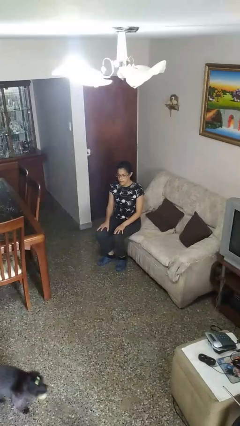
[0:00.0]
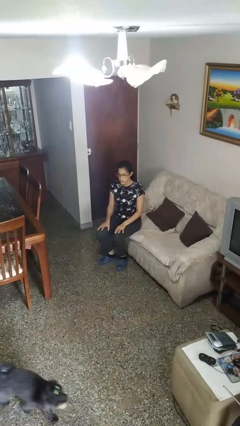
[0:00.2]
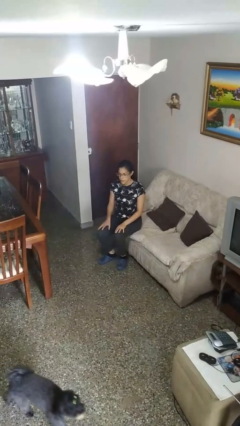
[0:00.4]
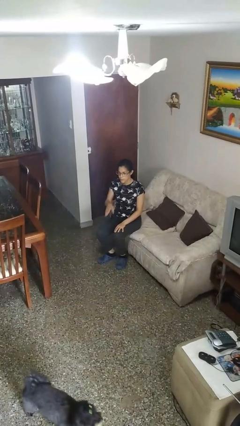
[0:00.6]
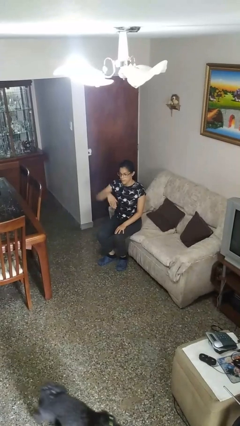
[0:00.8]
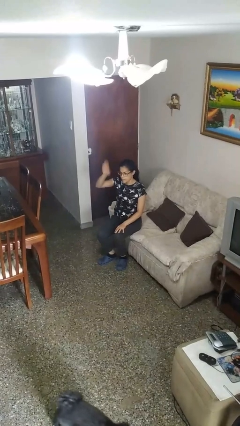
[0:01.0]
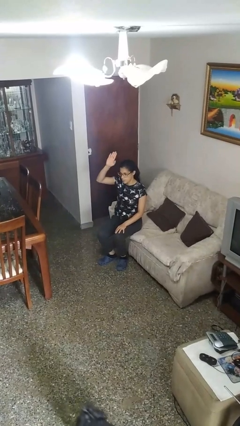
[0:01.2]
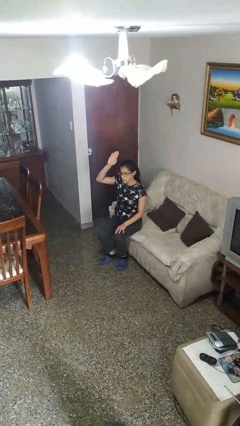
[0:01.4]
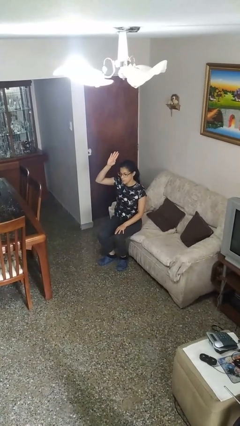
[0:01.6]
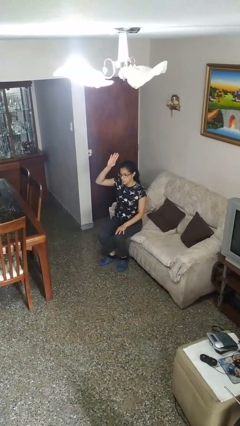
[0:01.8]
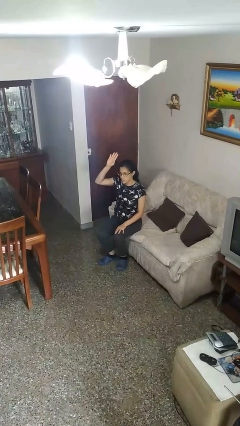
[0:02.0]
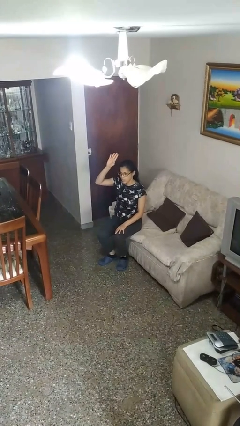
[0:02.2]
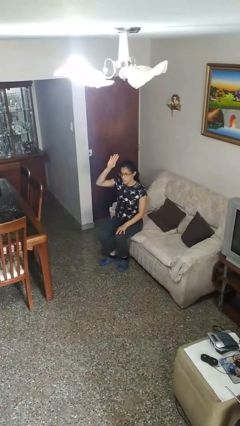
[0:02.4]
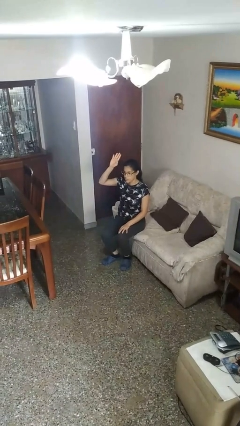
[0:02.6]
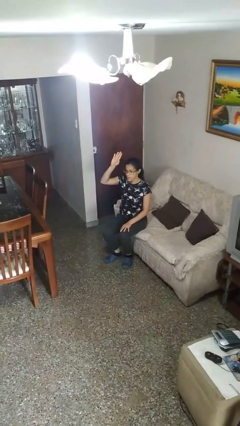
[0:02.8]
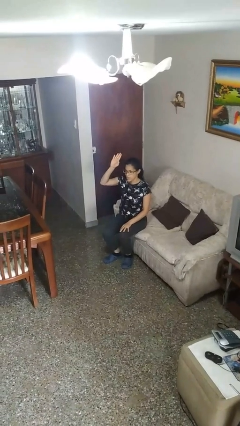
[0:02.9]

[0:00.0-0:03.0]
person gestures swipe up

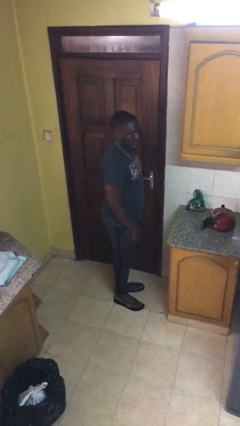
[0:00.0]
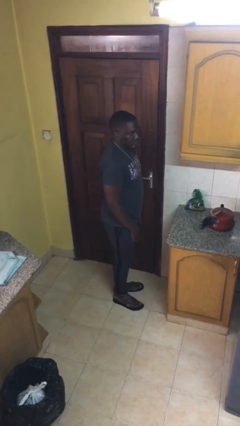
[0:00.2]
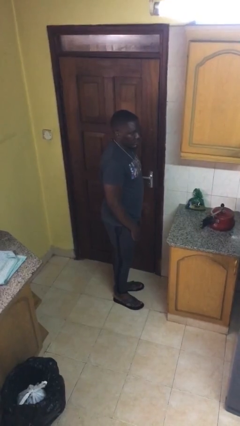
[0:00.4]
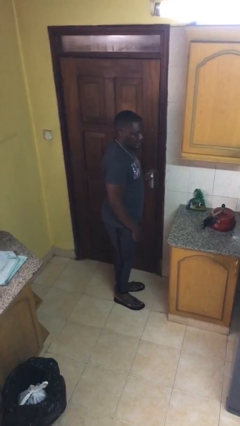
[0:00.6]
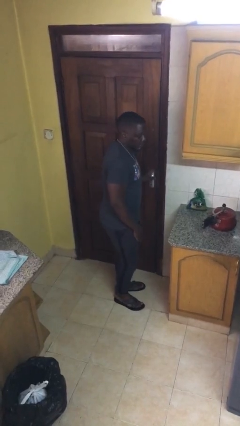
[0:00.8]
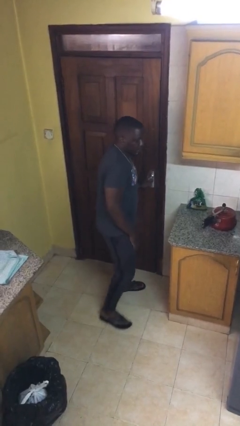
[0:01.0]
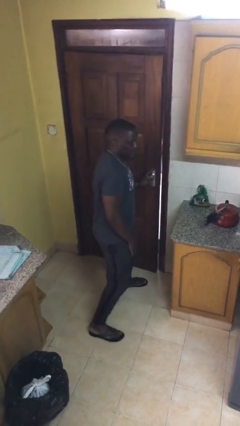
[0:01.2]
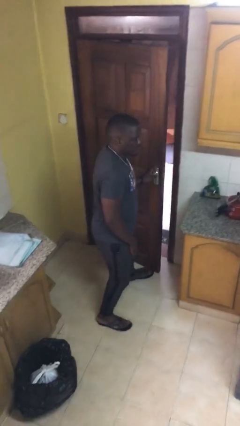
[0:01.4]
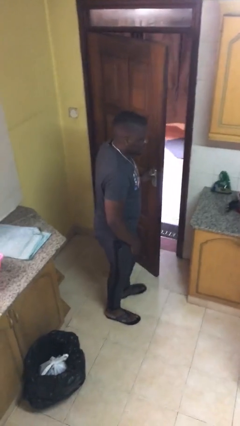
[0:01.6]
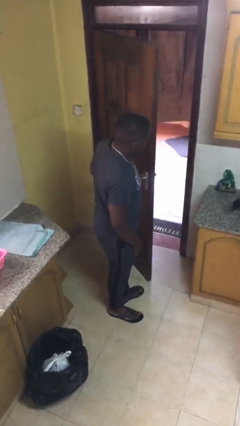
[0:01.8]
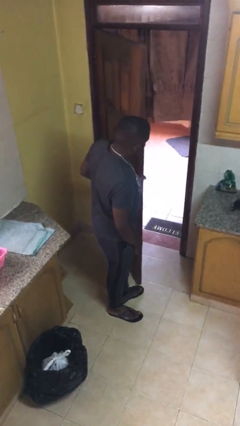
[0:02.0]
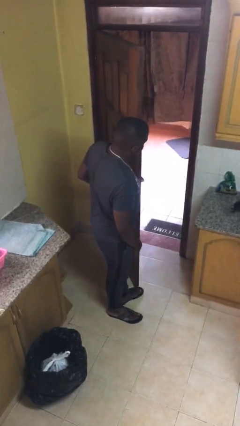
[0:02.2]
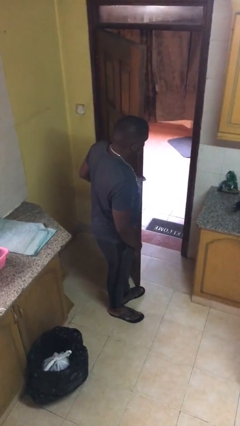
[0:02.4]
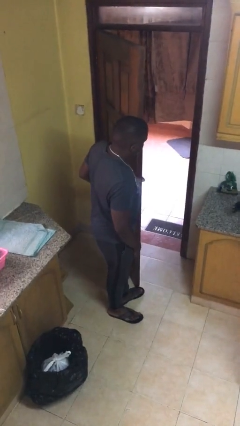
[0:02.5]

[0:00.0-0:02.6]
person opens facility door

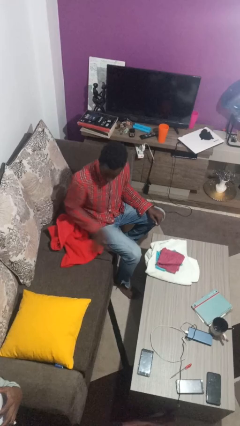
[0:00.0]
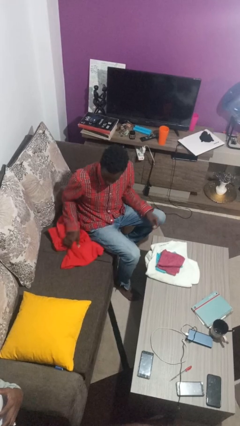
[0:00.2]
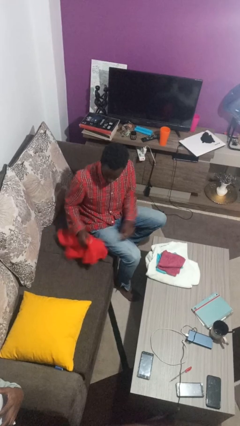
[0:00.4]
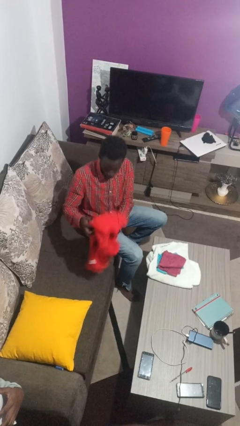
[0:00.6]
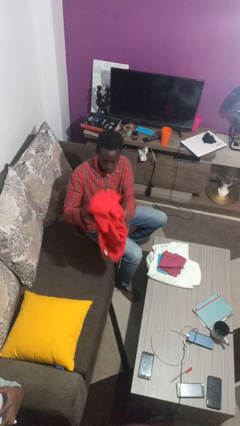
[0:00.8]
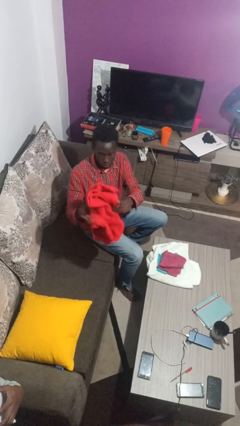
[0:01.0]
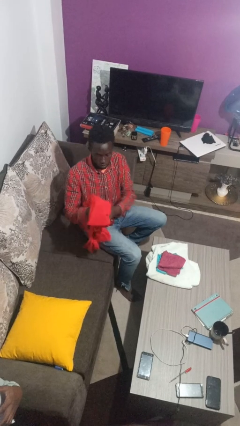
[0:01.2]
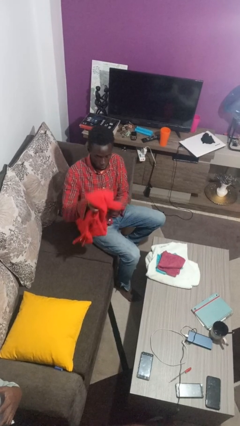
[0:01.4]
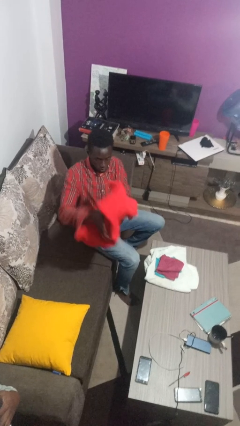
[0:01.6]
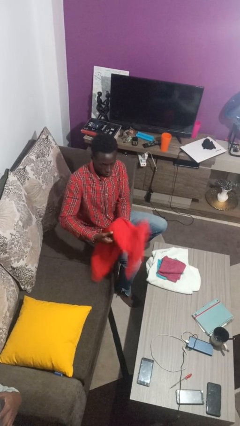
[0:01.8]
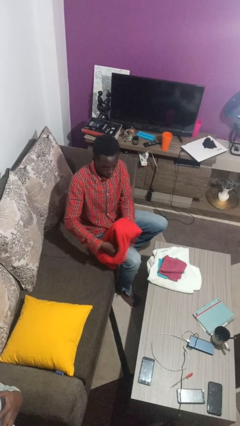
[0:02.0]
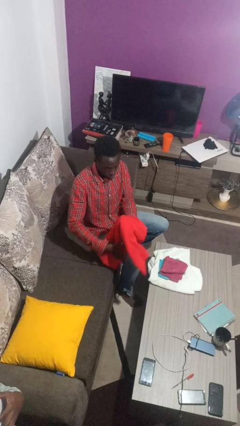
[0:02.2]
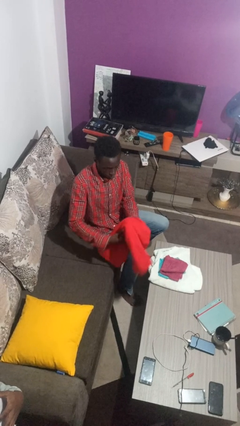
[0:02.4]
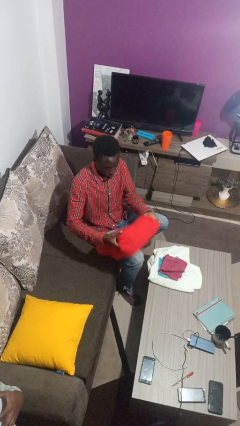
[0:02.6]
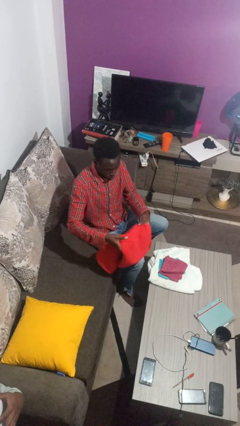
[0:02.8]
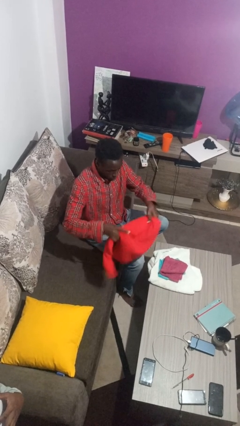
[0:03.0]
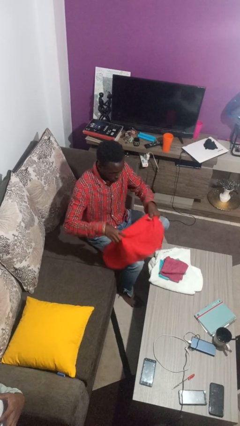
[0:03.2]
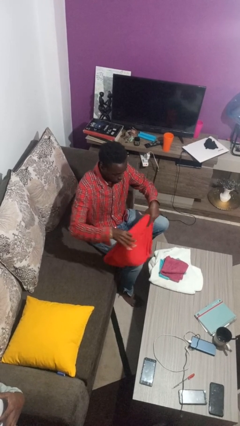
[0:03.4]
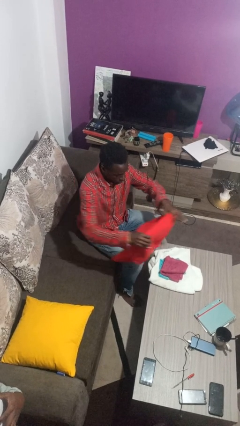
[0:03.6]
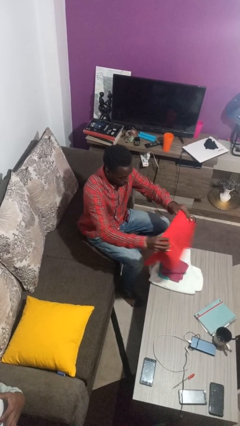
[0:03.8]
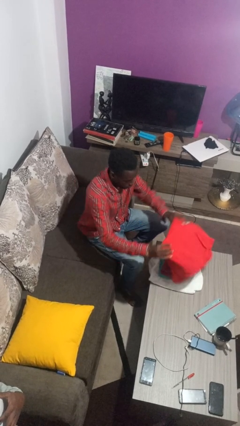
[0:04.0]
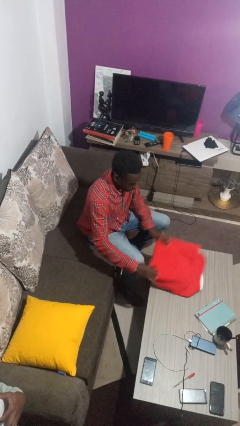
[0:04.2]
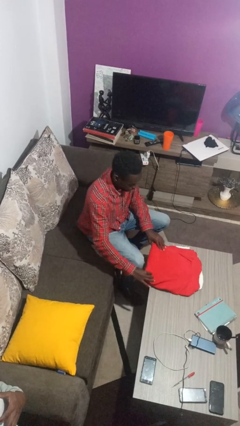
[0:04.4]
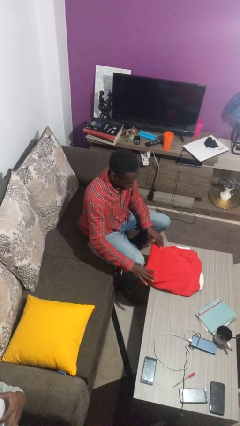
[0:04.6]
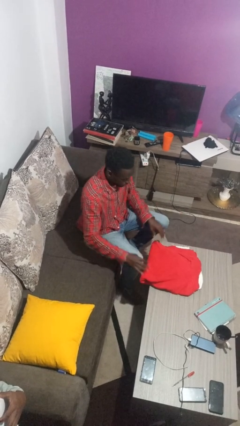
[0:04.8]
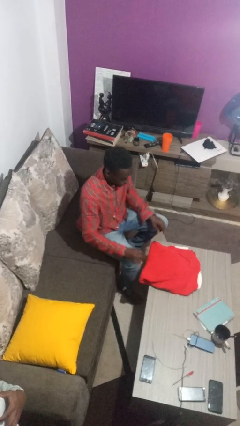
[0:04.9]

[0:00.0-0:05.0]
person folds towel

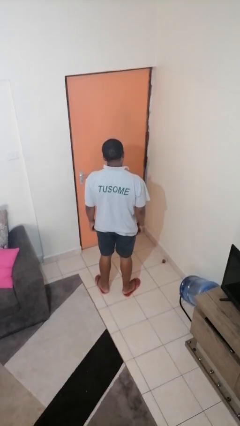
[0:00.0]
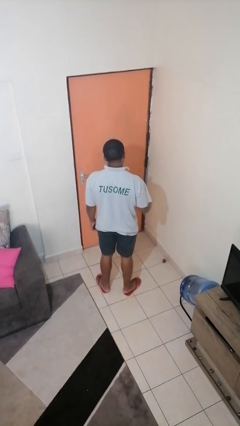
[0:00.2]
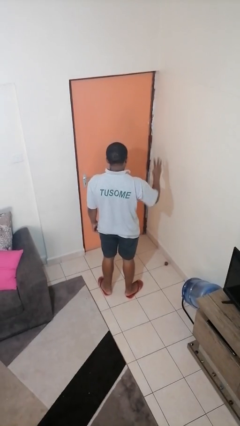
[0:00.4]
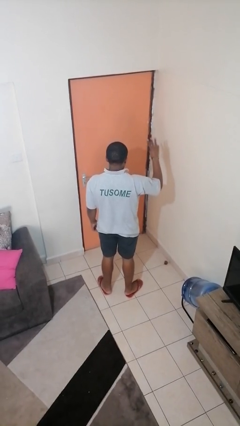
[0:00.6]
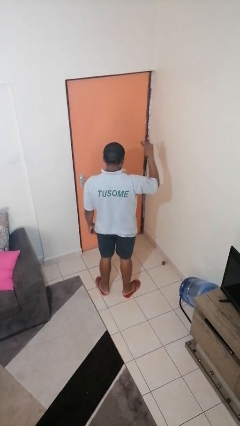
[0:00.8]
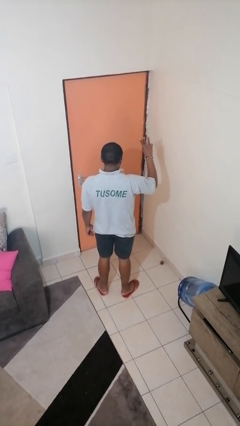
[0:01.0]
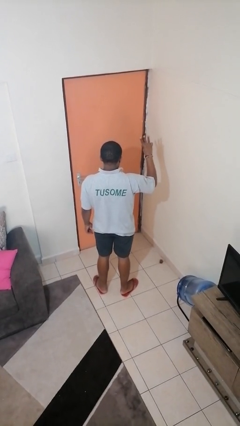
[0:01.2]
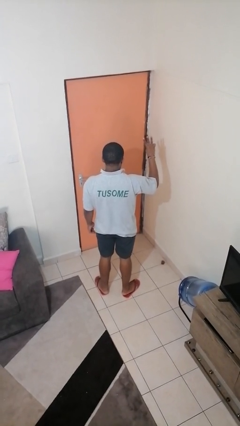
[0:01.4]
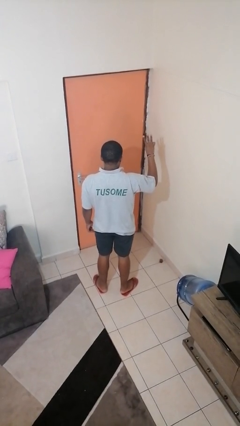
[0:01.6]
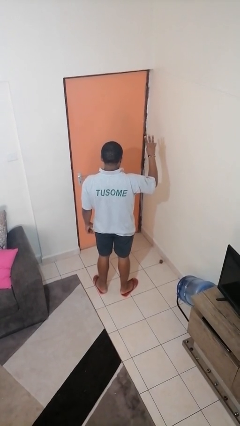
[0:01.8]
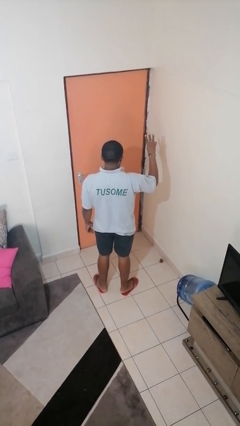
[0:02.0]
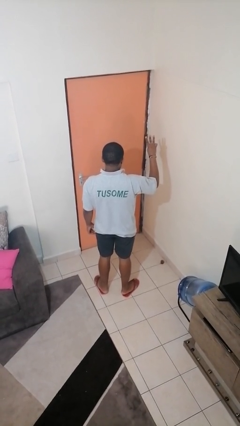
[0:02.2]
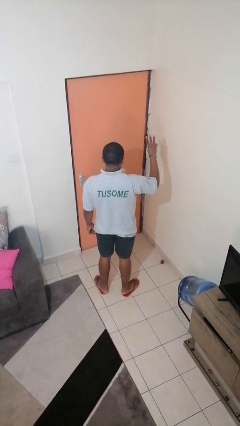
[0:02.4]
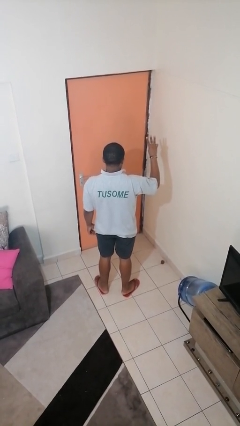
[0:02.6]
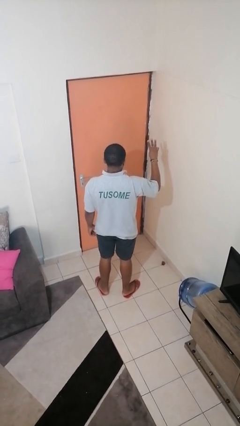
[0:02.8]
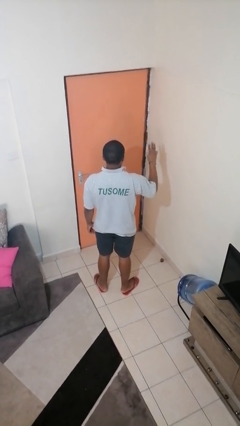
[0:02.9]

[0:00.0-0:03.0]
person gestures number three

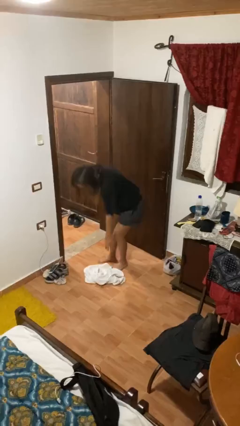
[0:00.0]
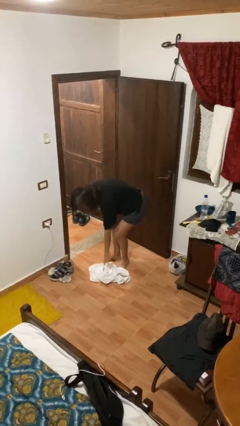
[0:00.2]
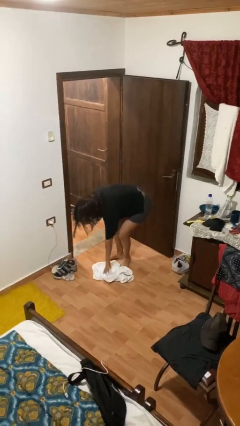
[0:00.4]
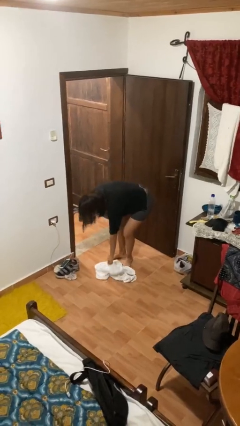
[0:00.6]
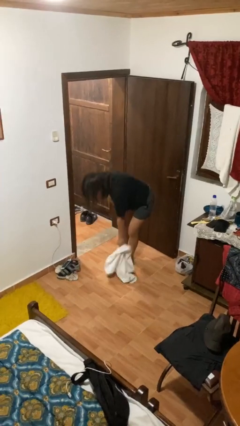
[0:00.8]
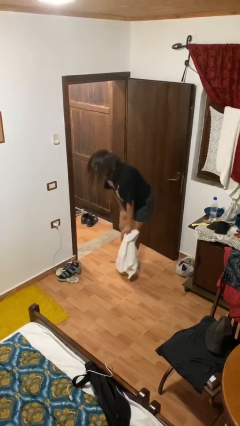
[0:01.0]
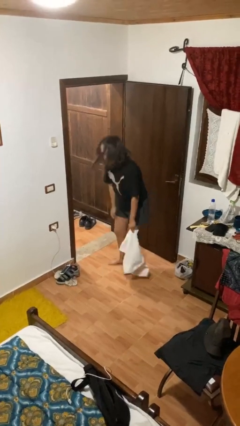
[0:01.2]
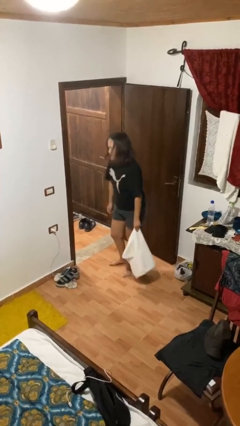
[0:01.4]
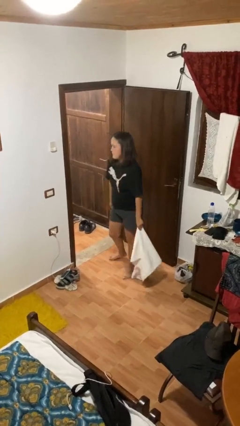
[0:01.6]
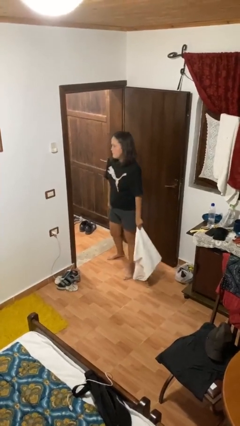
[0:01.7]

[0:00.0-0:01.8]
person picks up object from floor

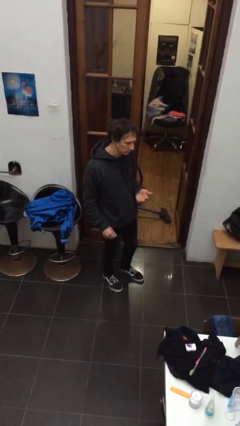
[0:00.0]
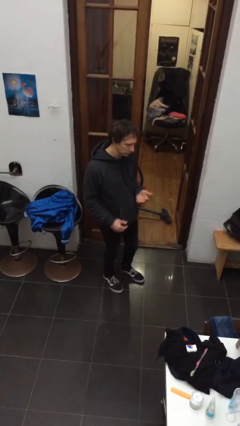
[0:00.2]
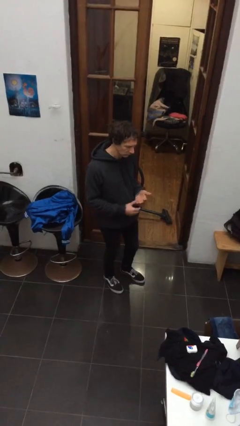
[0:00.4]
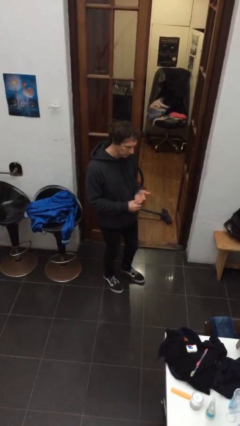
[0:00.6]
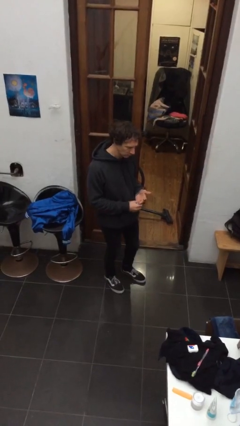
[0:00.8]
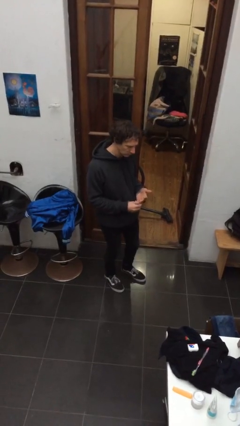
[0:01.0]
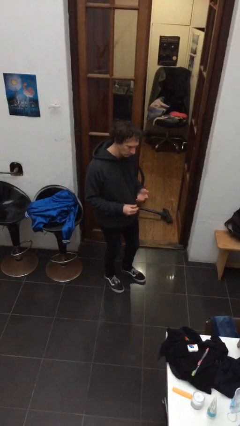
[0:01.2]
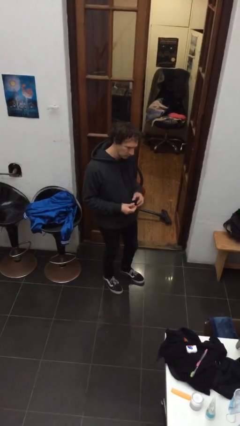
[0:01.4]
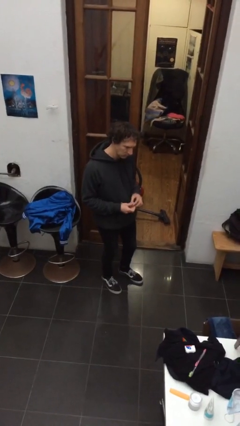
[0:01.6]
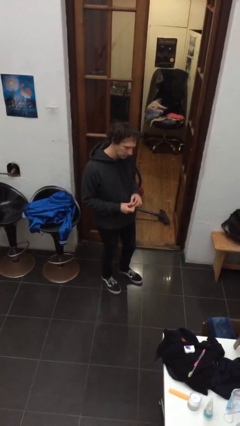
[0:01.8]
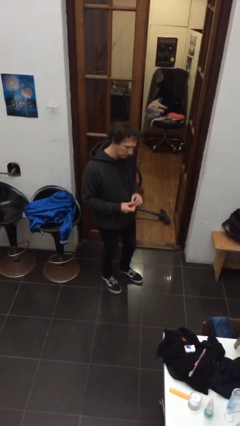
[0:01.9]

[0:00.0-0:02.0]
person takes off ring
